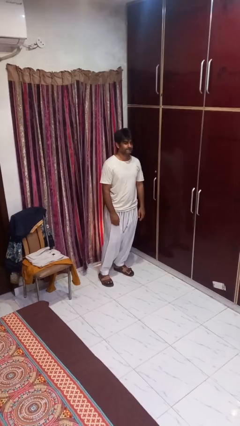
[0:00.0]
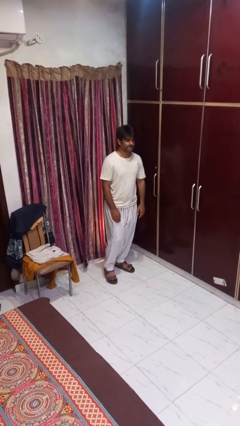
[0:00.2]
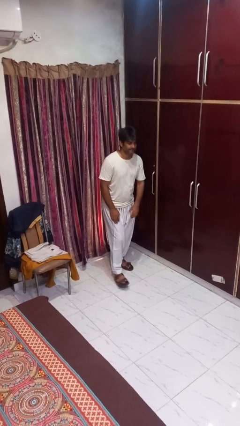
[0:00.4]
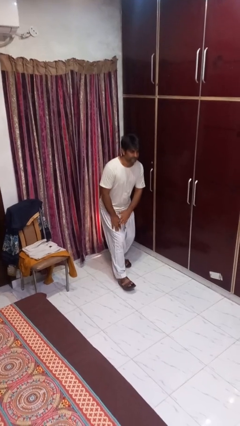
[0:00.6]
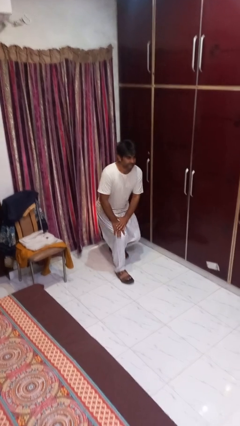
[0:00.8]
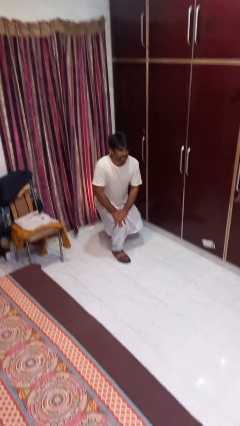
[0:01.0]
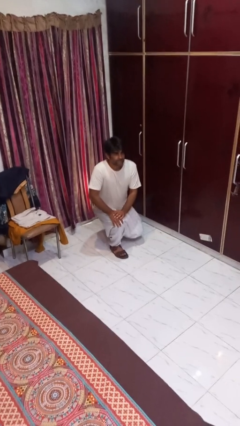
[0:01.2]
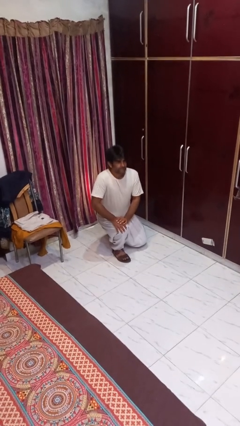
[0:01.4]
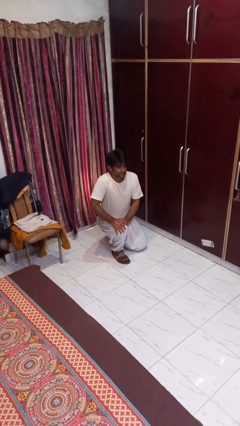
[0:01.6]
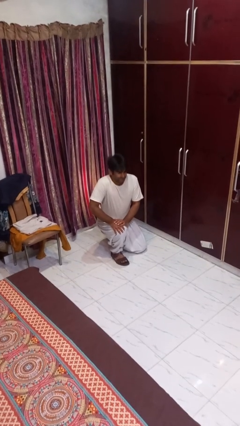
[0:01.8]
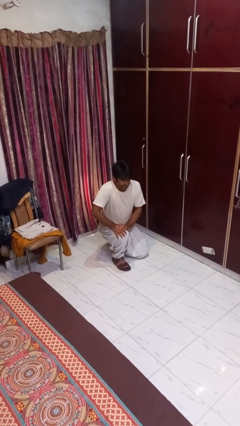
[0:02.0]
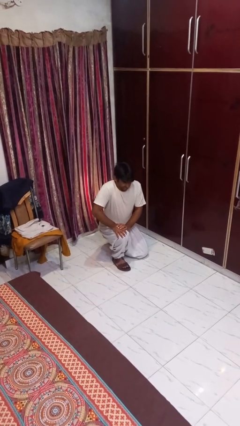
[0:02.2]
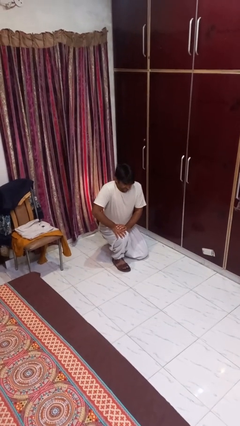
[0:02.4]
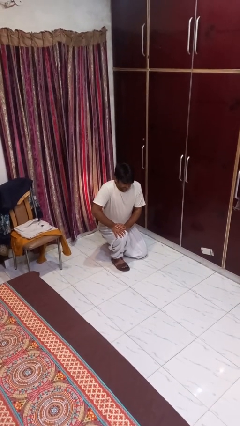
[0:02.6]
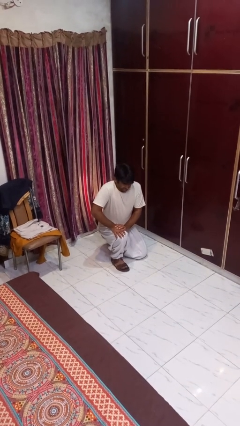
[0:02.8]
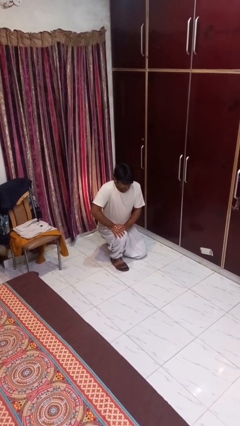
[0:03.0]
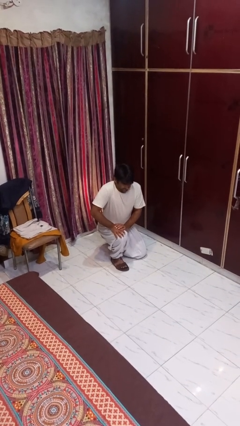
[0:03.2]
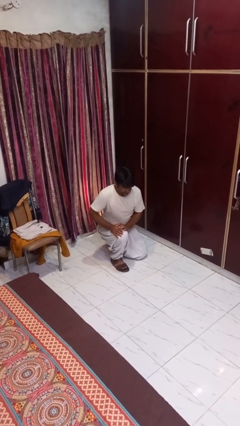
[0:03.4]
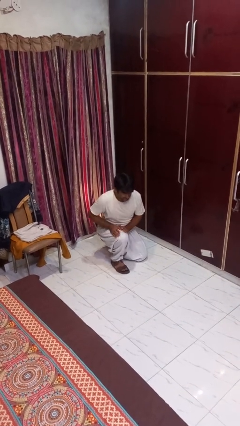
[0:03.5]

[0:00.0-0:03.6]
person kneels

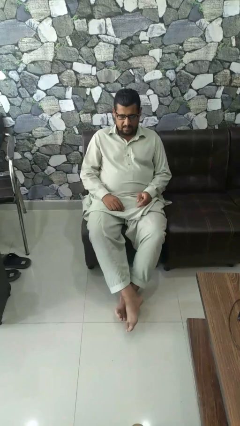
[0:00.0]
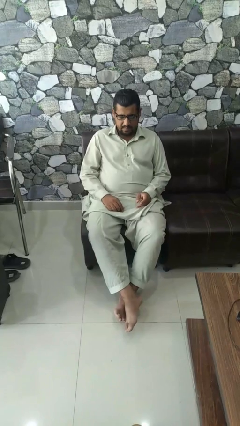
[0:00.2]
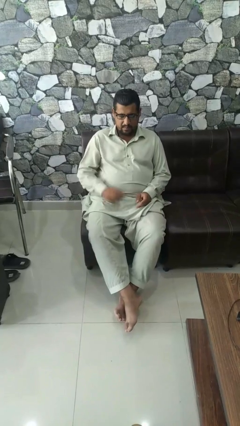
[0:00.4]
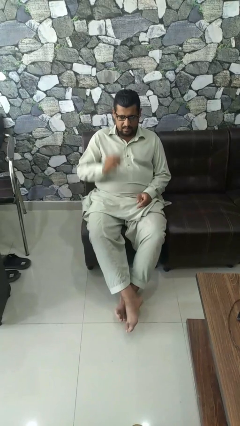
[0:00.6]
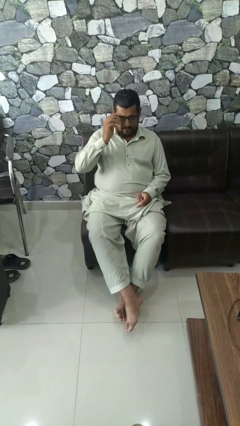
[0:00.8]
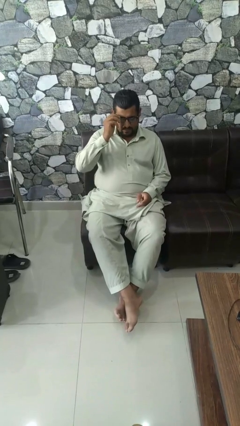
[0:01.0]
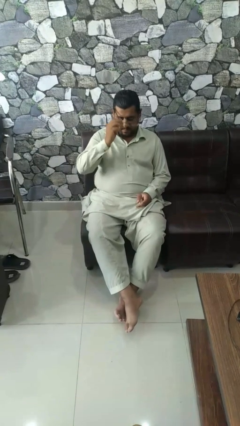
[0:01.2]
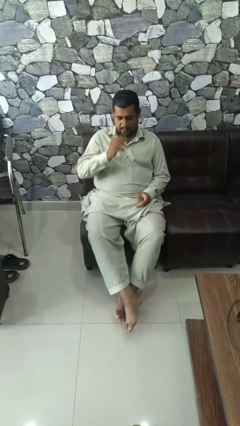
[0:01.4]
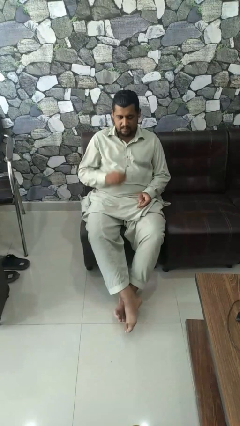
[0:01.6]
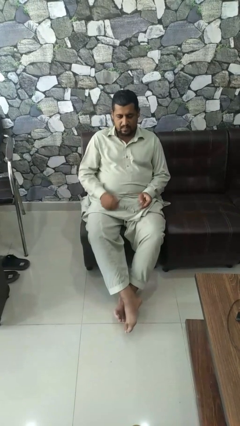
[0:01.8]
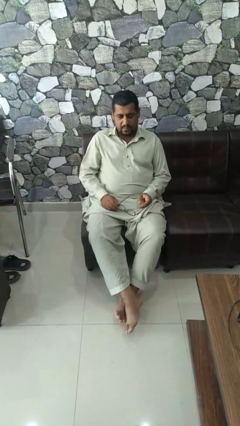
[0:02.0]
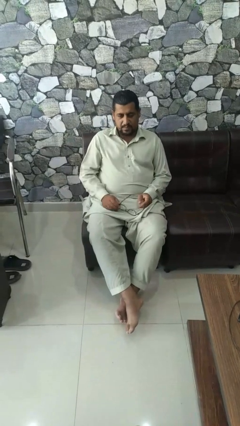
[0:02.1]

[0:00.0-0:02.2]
person takes off glasses

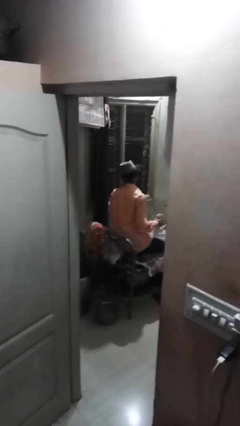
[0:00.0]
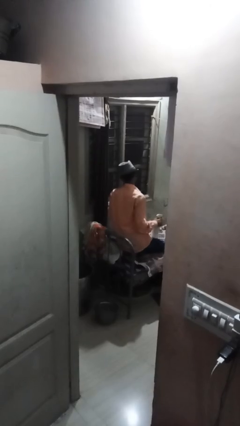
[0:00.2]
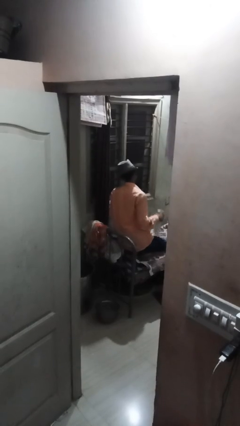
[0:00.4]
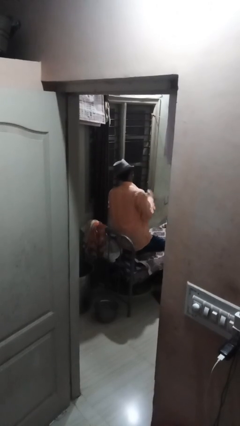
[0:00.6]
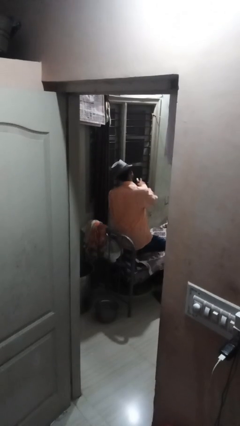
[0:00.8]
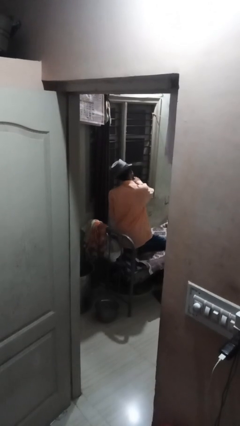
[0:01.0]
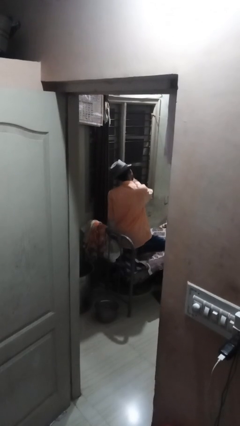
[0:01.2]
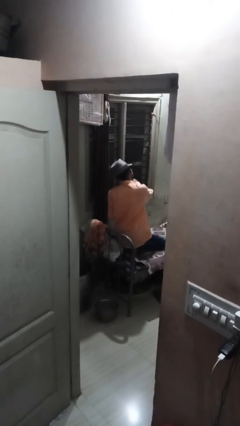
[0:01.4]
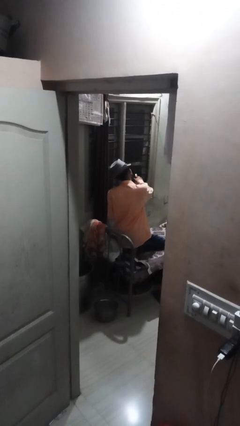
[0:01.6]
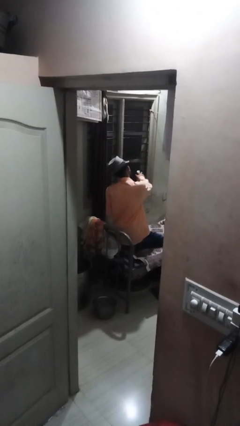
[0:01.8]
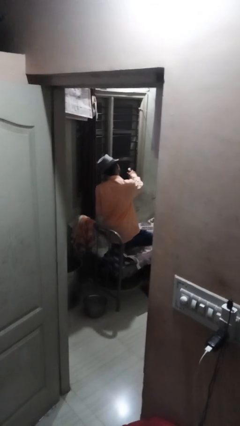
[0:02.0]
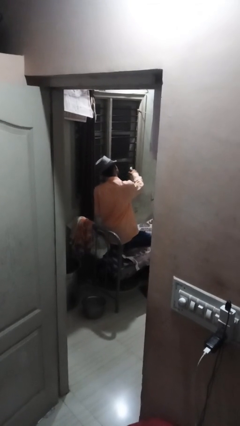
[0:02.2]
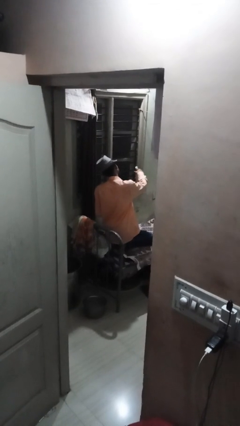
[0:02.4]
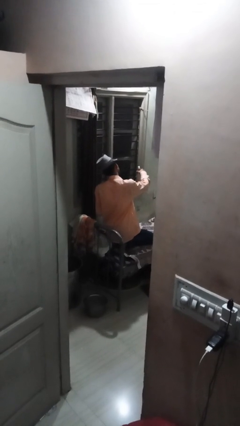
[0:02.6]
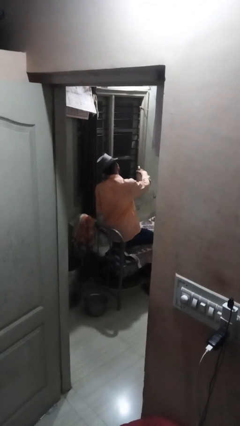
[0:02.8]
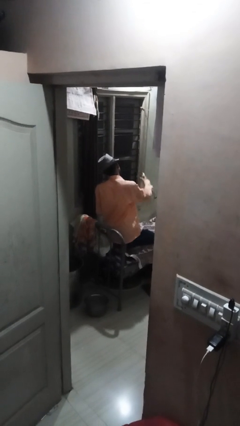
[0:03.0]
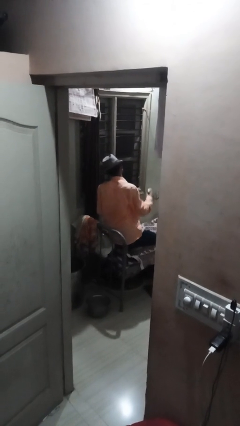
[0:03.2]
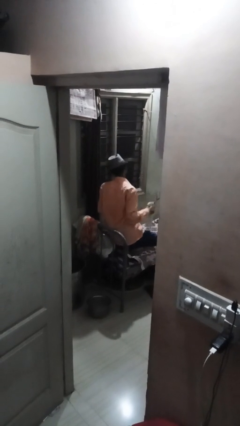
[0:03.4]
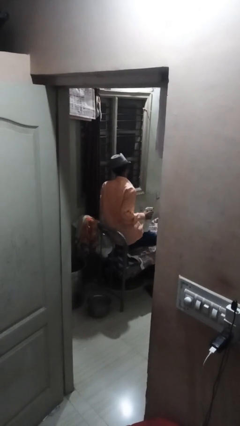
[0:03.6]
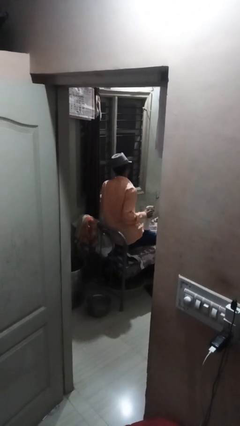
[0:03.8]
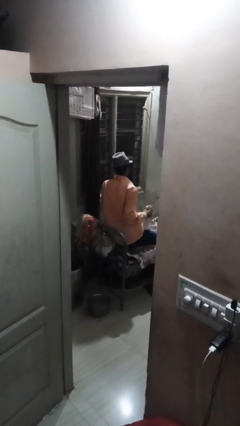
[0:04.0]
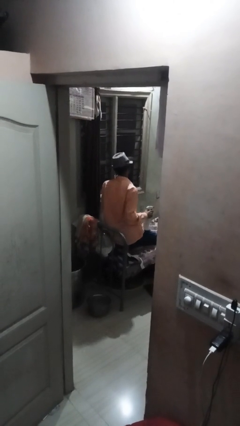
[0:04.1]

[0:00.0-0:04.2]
person sprays from bottle

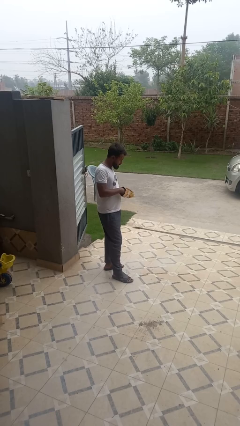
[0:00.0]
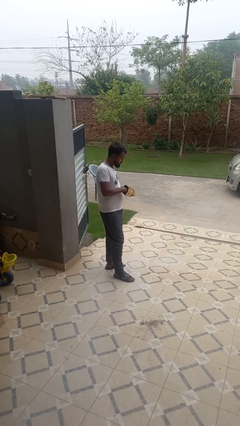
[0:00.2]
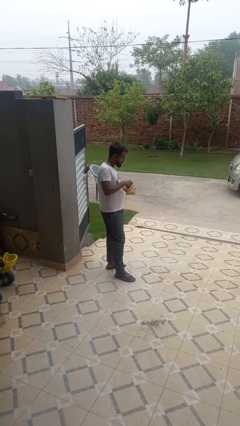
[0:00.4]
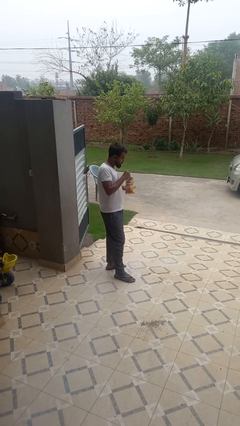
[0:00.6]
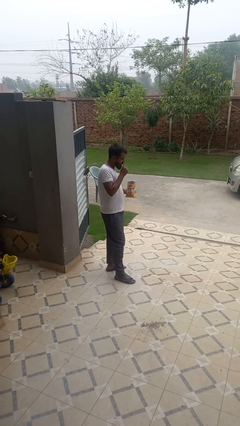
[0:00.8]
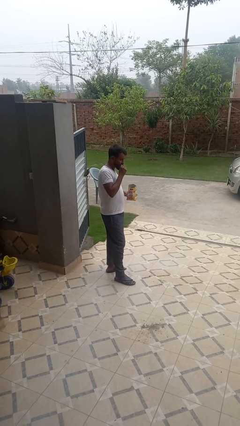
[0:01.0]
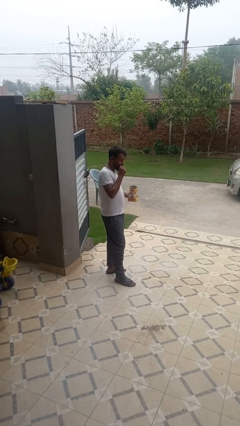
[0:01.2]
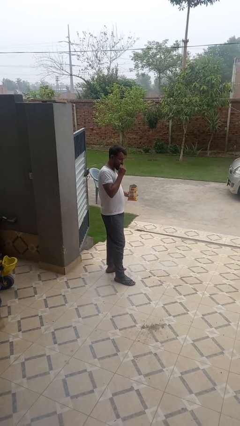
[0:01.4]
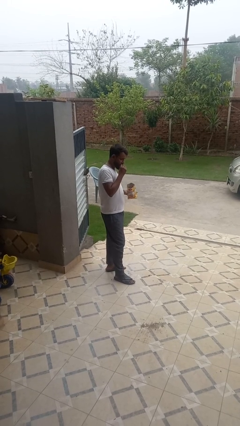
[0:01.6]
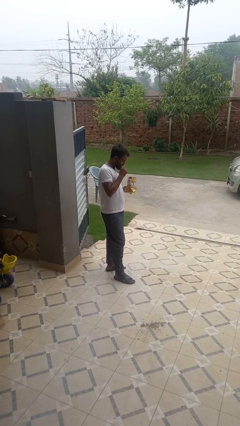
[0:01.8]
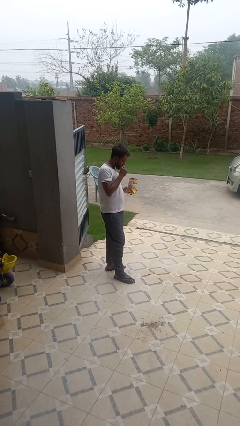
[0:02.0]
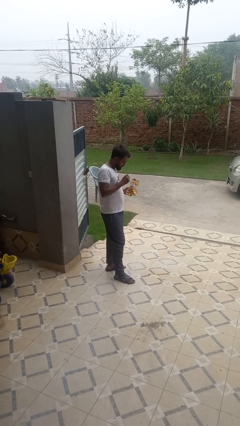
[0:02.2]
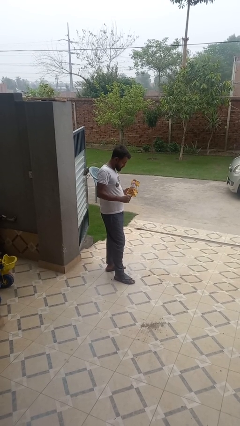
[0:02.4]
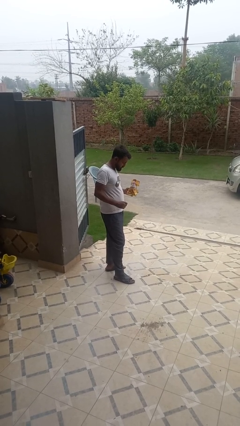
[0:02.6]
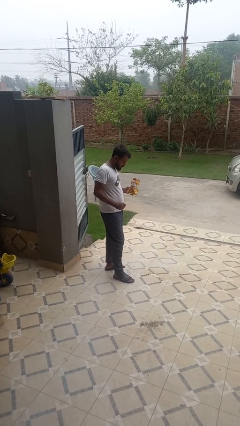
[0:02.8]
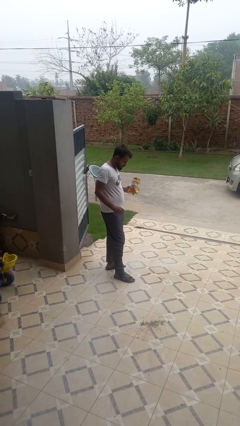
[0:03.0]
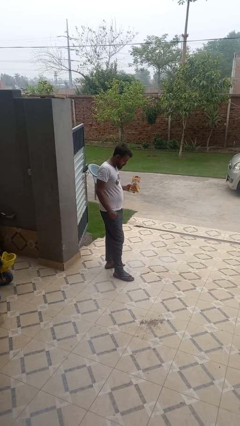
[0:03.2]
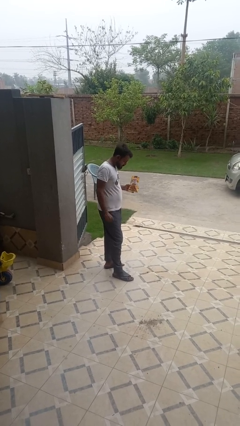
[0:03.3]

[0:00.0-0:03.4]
person eats snack from bag

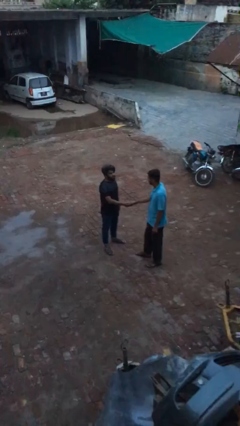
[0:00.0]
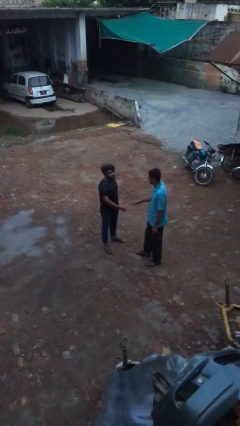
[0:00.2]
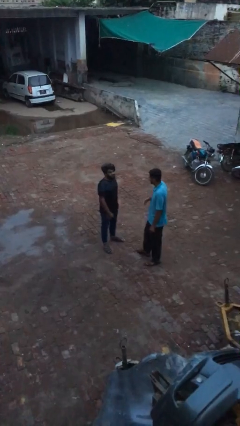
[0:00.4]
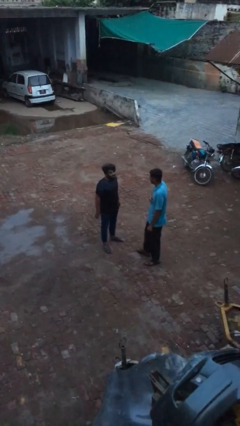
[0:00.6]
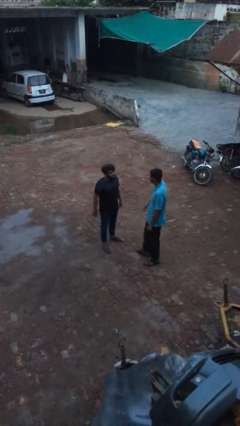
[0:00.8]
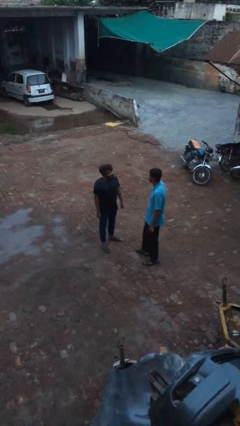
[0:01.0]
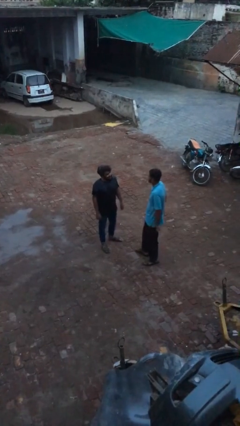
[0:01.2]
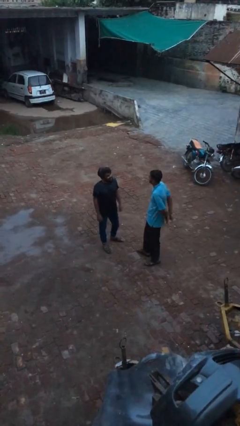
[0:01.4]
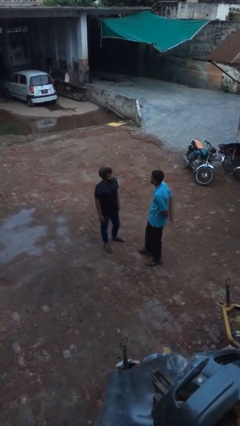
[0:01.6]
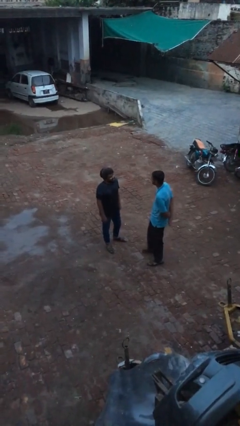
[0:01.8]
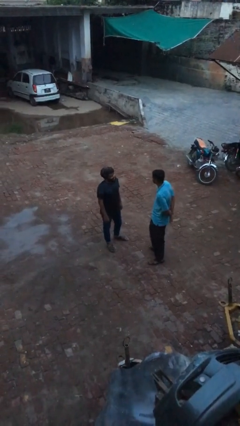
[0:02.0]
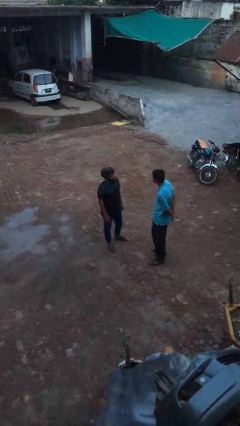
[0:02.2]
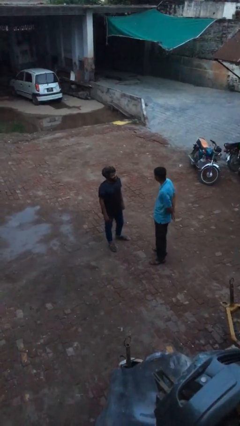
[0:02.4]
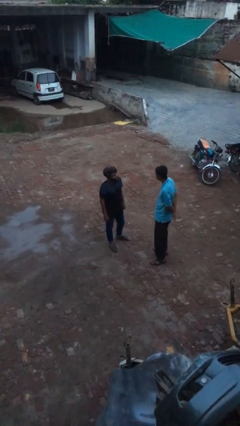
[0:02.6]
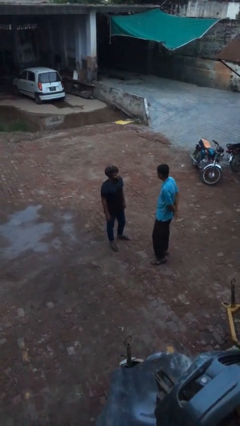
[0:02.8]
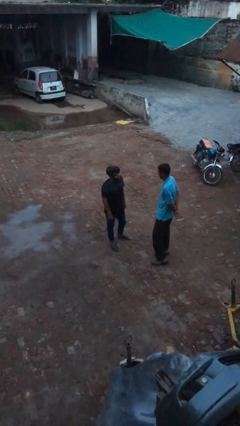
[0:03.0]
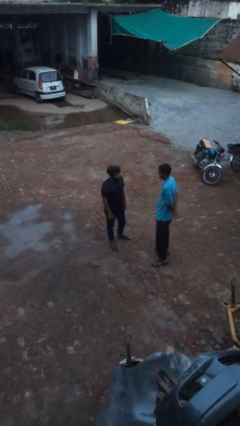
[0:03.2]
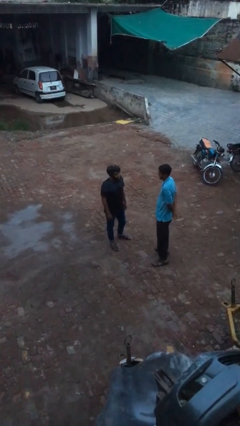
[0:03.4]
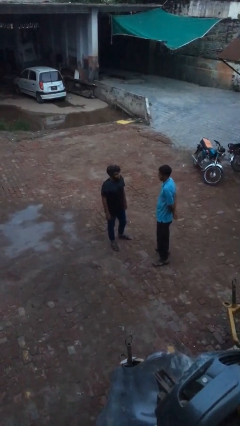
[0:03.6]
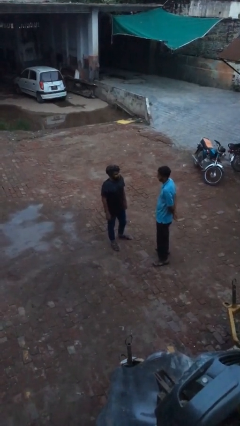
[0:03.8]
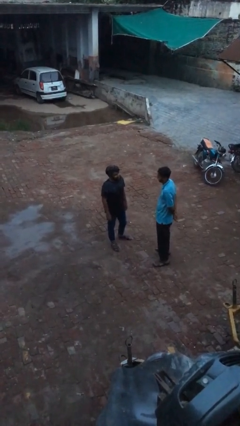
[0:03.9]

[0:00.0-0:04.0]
person talks to person

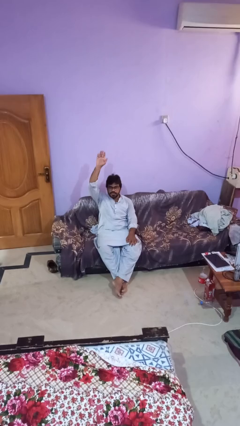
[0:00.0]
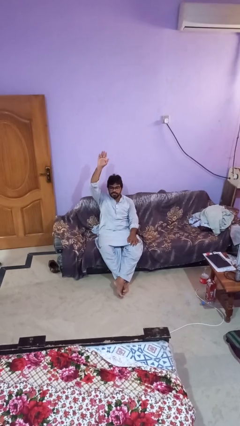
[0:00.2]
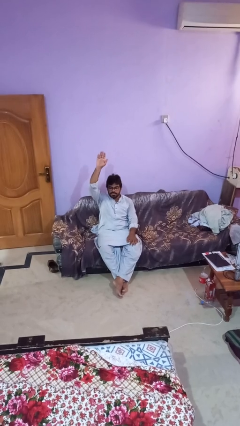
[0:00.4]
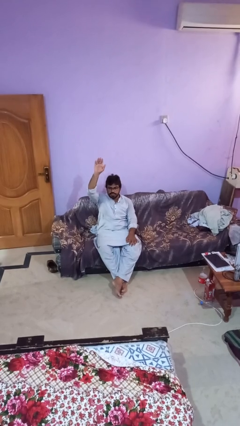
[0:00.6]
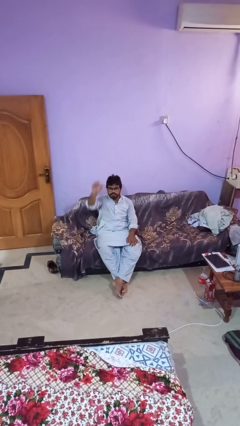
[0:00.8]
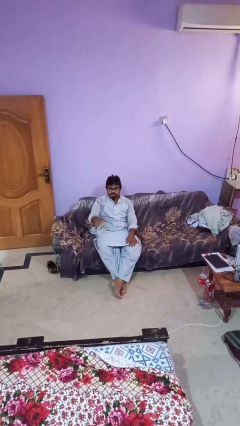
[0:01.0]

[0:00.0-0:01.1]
person gestures lower hand
